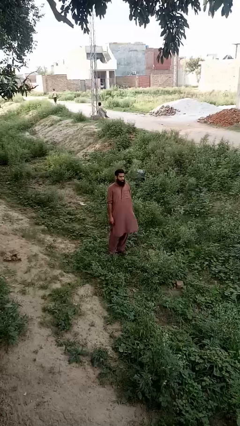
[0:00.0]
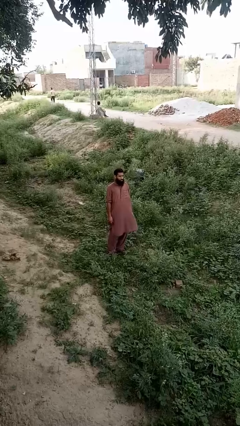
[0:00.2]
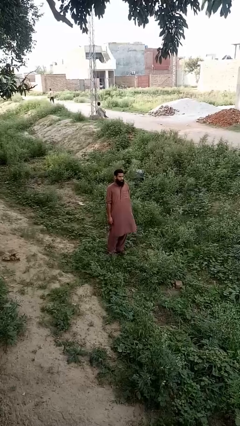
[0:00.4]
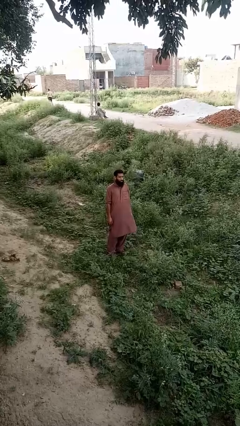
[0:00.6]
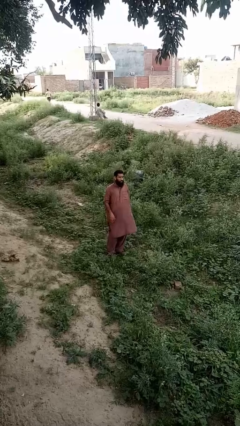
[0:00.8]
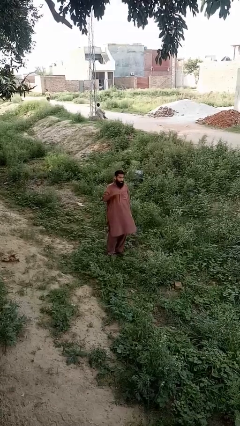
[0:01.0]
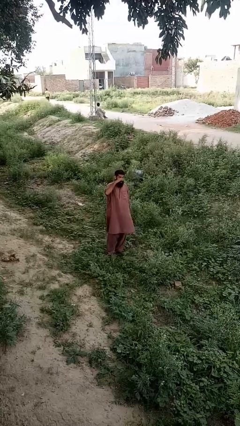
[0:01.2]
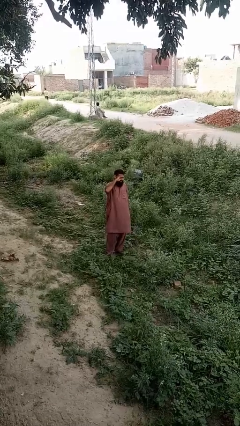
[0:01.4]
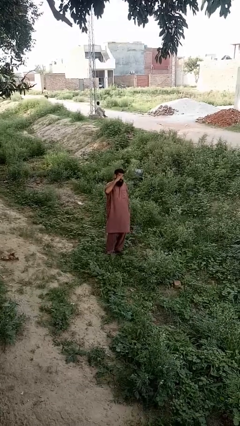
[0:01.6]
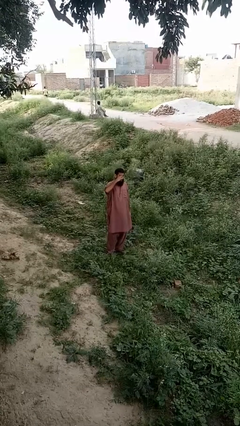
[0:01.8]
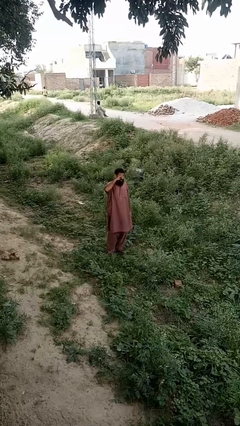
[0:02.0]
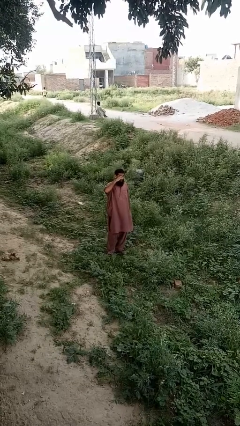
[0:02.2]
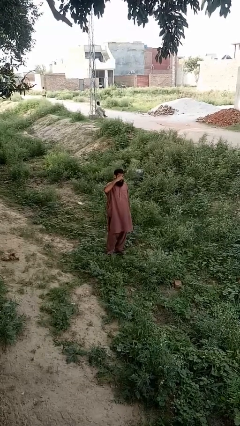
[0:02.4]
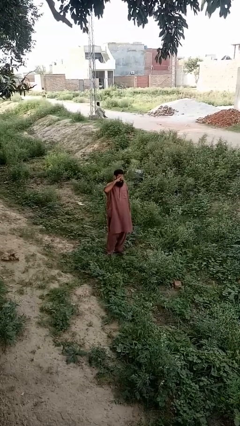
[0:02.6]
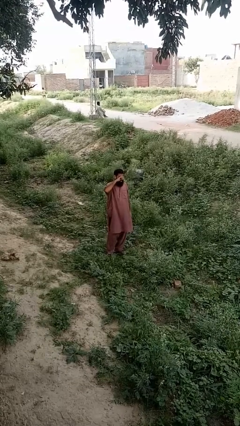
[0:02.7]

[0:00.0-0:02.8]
person rubs eyes

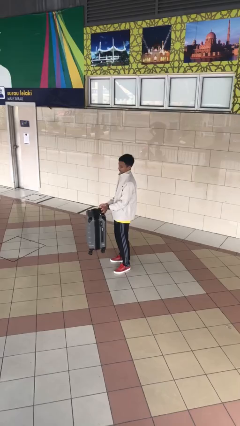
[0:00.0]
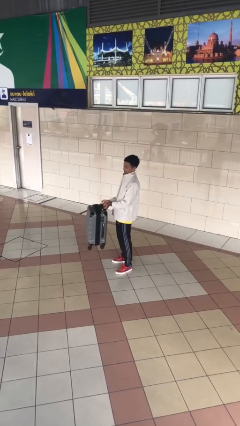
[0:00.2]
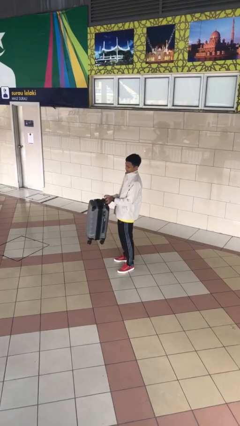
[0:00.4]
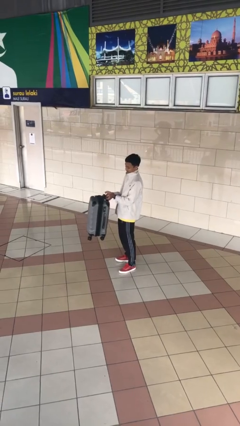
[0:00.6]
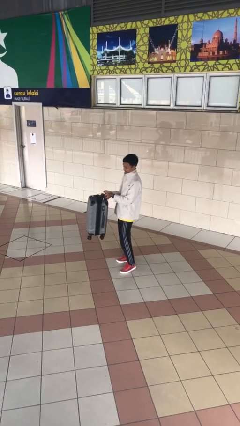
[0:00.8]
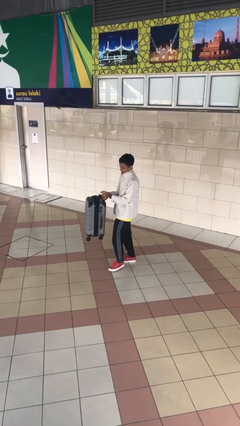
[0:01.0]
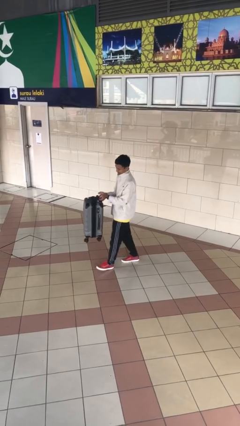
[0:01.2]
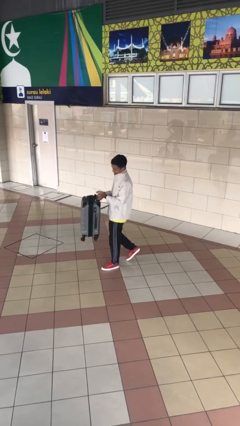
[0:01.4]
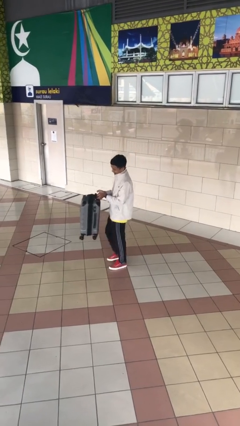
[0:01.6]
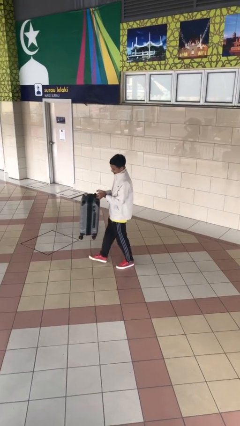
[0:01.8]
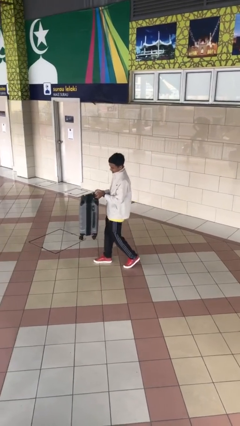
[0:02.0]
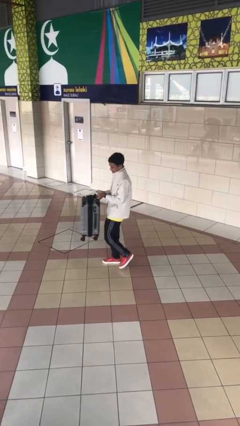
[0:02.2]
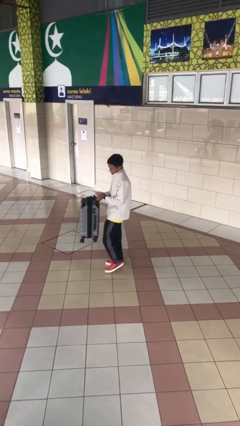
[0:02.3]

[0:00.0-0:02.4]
person carries heavy object

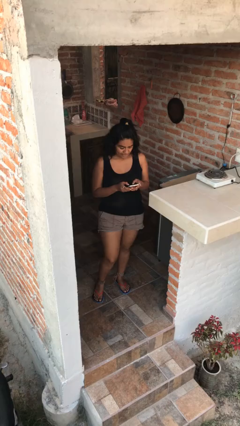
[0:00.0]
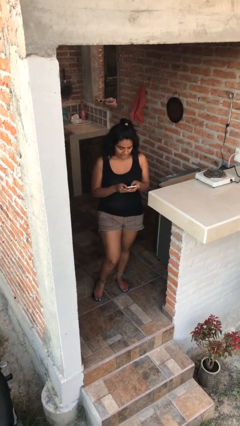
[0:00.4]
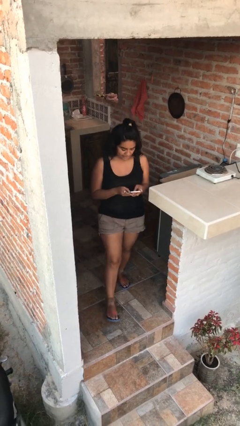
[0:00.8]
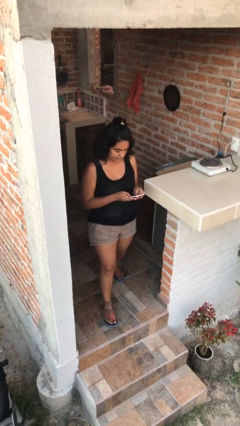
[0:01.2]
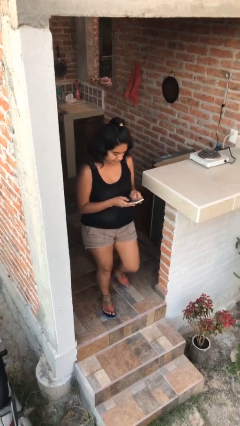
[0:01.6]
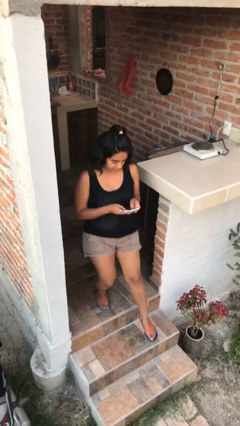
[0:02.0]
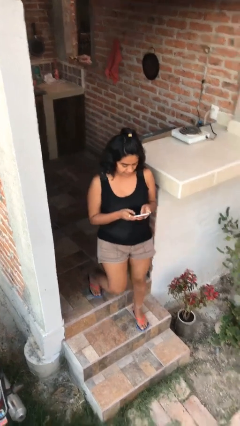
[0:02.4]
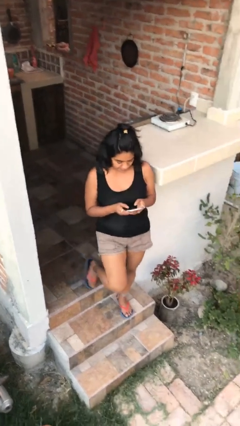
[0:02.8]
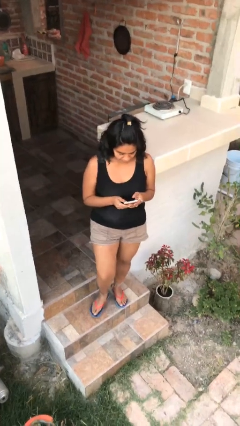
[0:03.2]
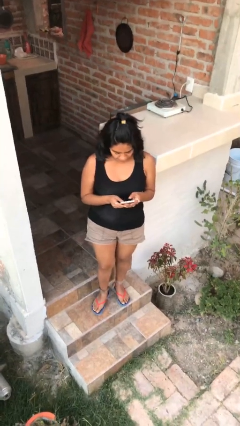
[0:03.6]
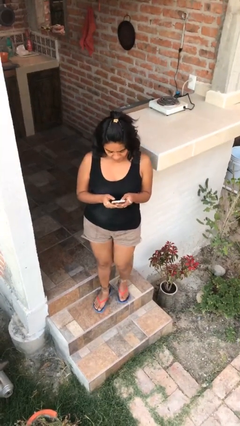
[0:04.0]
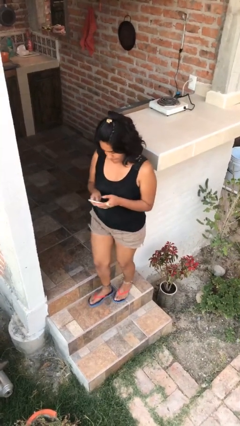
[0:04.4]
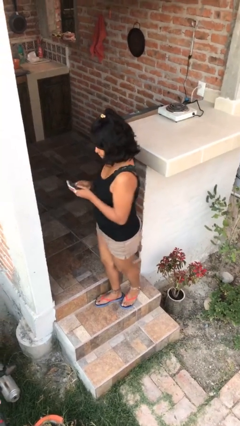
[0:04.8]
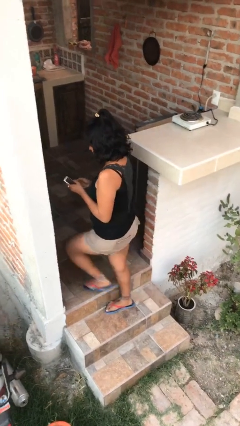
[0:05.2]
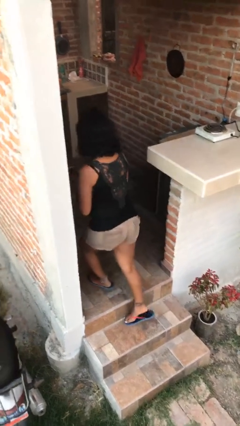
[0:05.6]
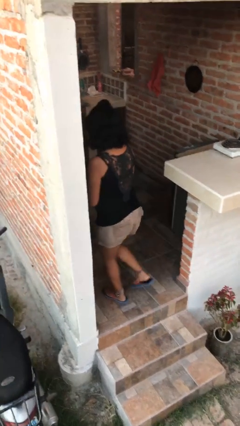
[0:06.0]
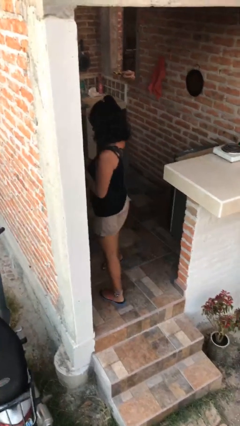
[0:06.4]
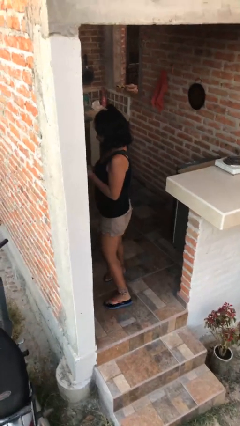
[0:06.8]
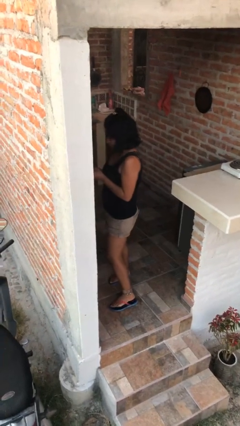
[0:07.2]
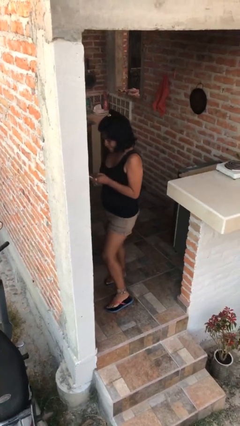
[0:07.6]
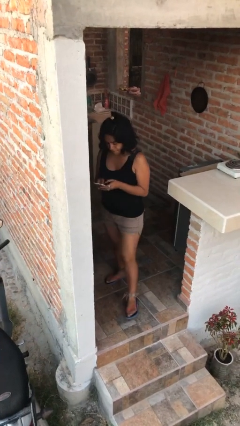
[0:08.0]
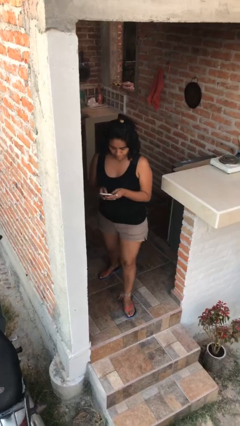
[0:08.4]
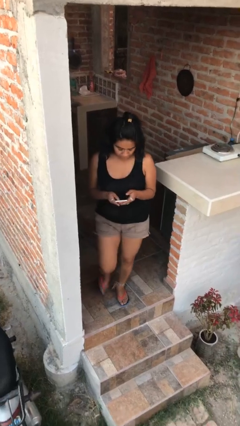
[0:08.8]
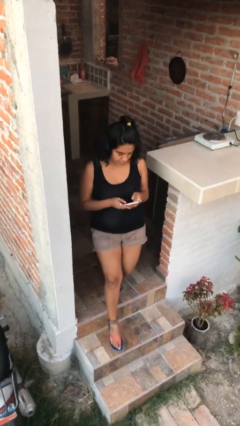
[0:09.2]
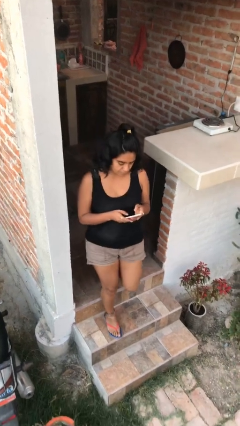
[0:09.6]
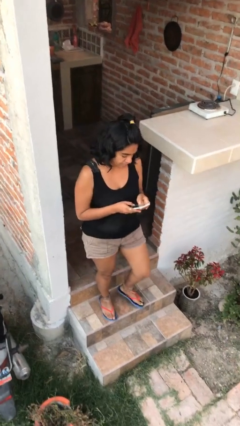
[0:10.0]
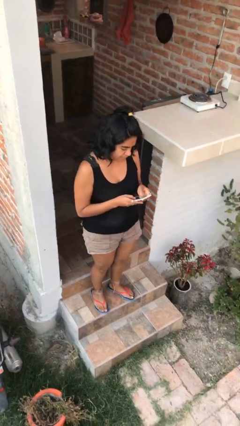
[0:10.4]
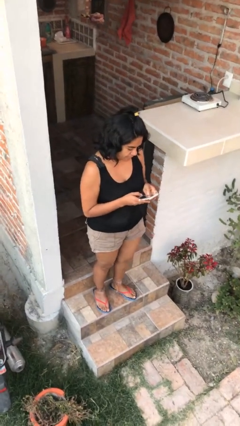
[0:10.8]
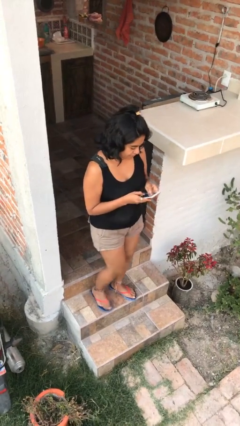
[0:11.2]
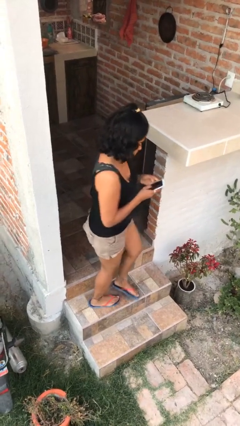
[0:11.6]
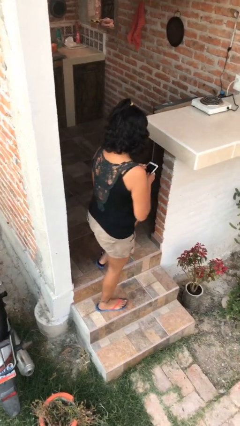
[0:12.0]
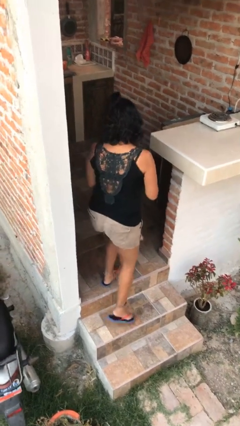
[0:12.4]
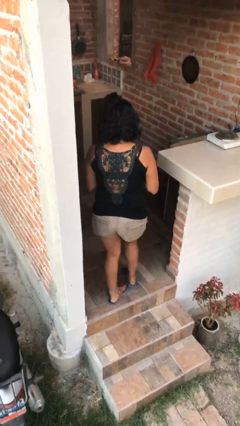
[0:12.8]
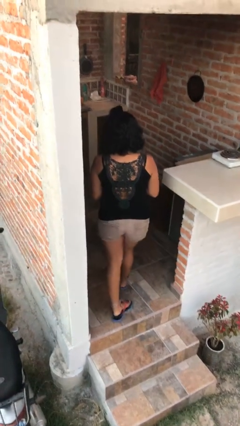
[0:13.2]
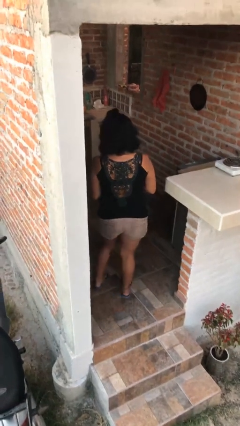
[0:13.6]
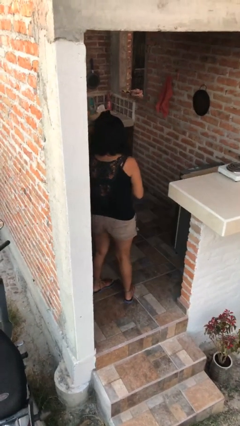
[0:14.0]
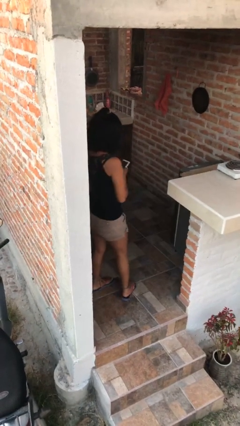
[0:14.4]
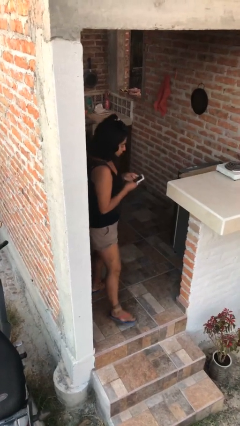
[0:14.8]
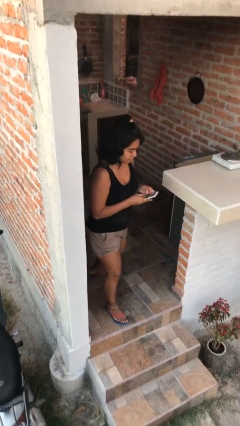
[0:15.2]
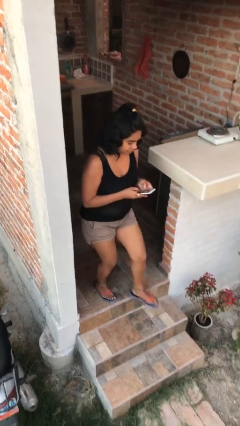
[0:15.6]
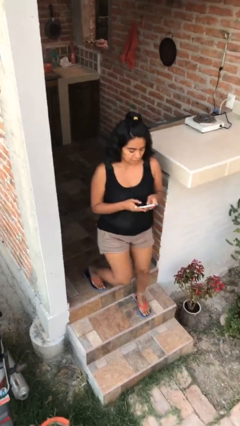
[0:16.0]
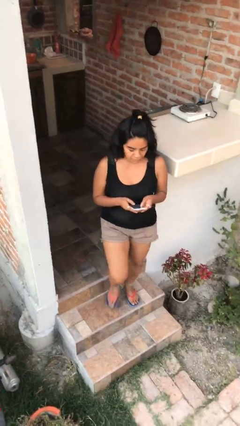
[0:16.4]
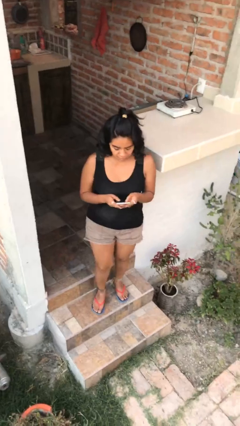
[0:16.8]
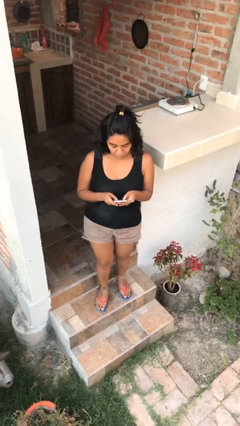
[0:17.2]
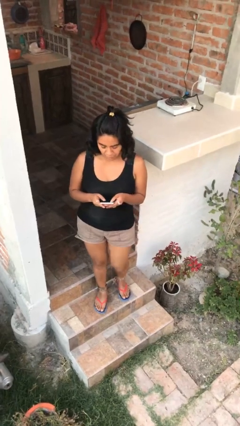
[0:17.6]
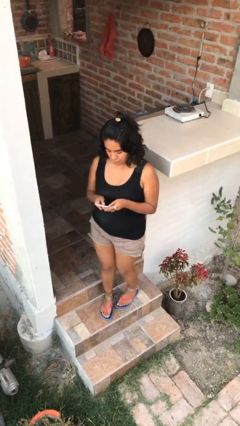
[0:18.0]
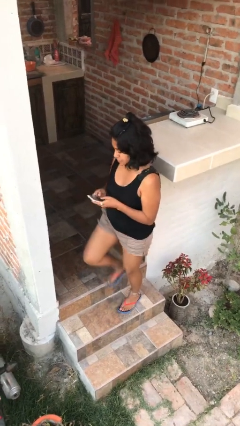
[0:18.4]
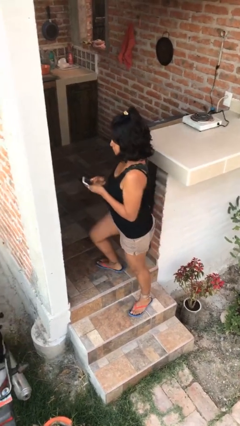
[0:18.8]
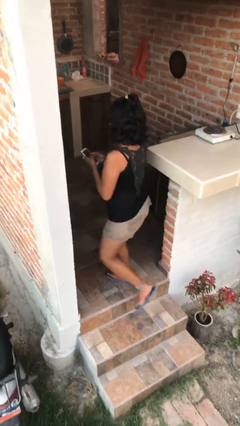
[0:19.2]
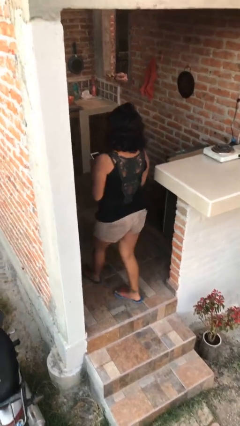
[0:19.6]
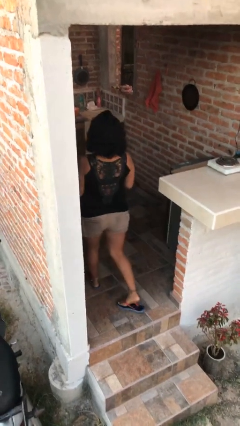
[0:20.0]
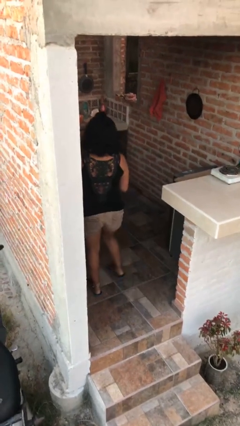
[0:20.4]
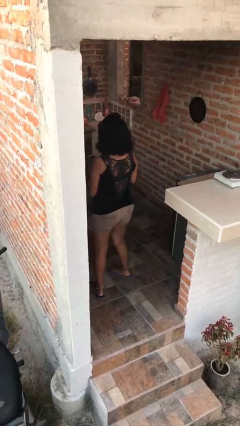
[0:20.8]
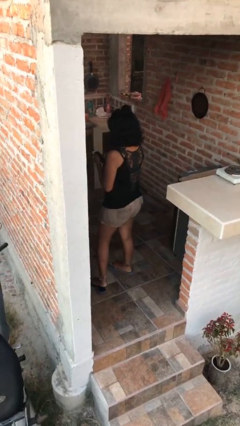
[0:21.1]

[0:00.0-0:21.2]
person texts on phone

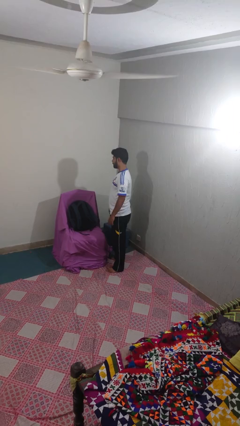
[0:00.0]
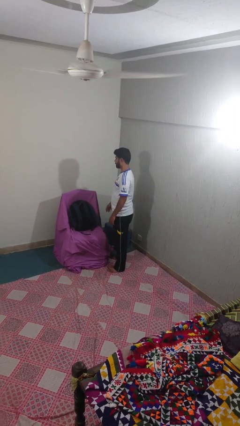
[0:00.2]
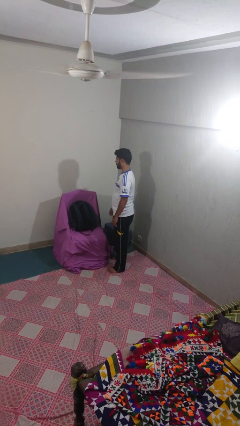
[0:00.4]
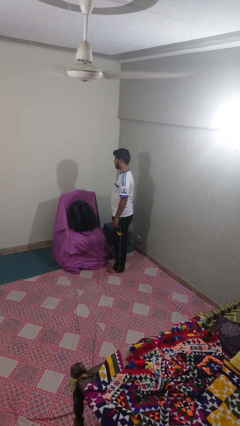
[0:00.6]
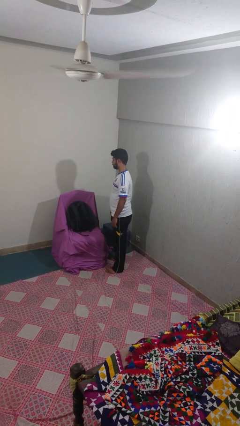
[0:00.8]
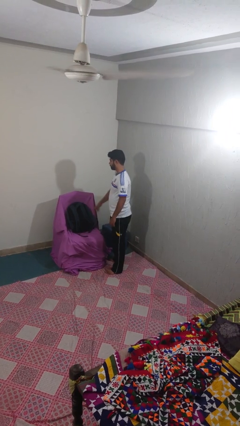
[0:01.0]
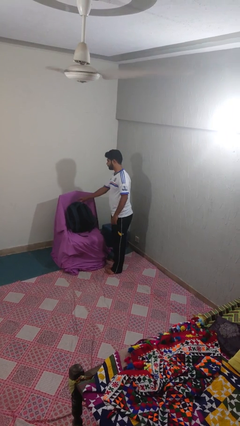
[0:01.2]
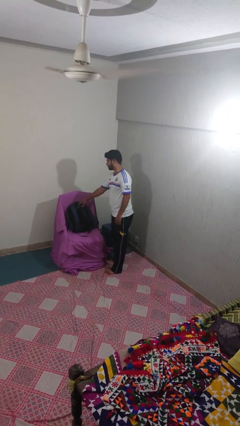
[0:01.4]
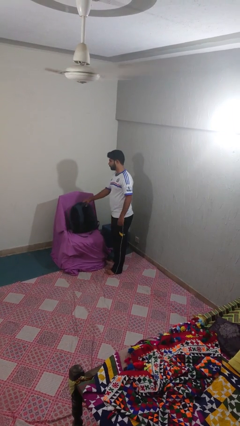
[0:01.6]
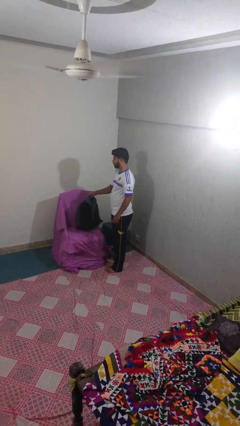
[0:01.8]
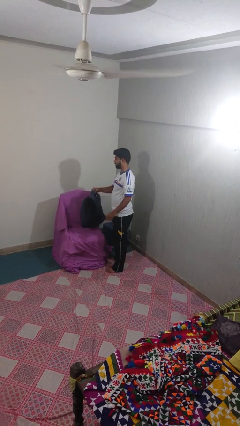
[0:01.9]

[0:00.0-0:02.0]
person picks up object from couch

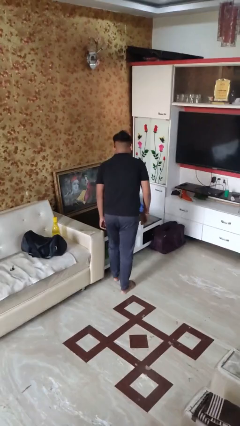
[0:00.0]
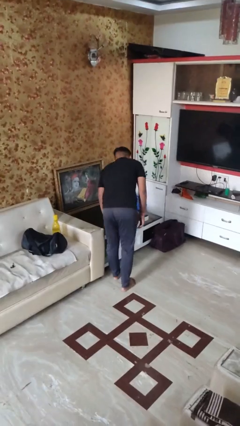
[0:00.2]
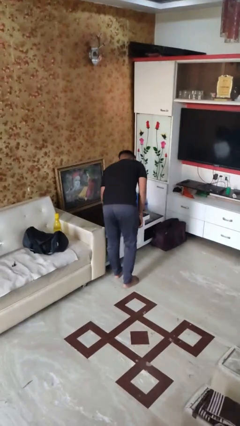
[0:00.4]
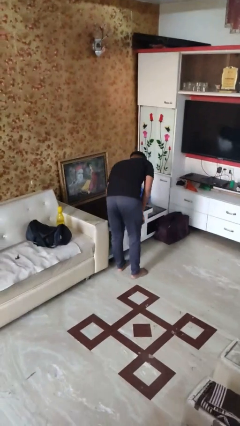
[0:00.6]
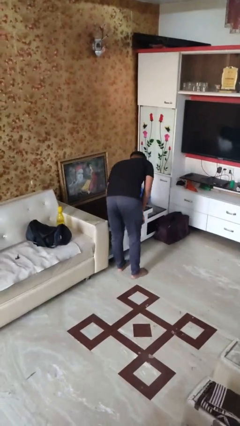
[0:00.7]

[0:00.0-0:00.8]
person bumps into table
